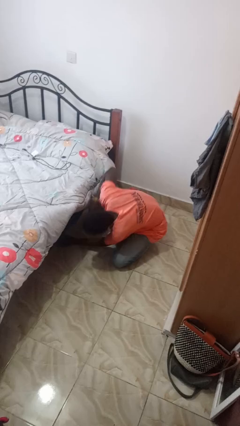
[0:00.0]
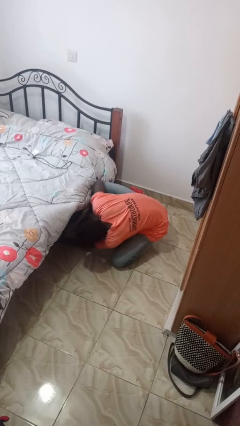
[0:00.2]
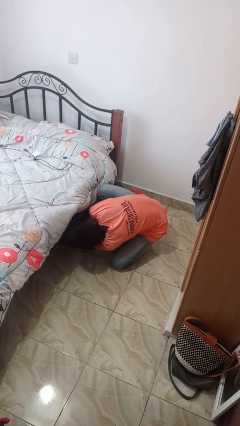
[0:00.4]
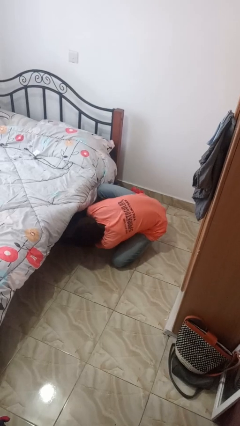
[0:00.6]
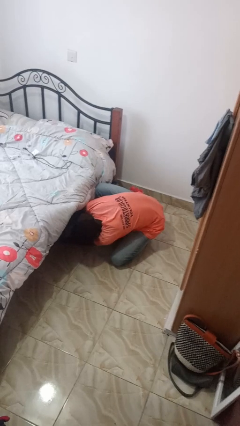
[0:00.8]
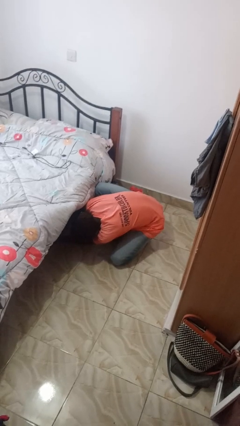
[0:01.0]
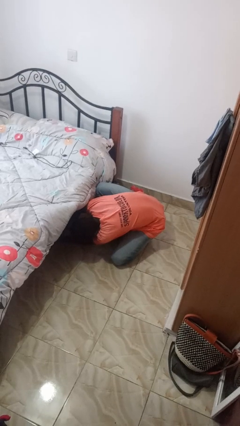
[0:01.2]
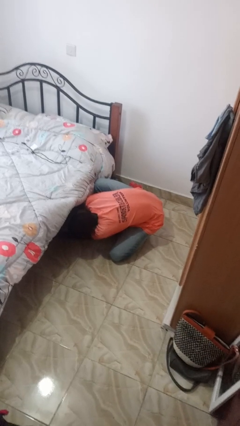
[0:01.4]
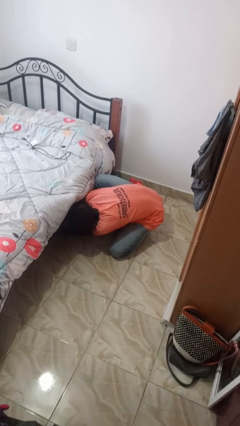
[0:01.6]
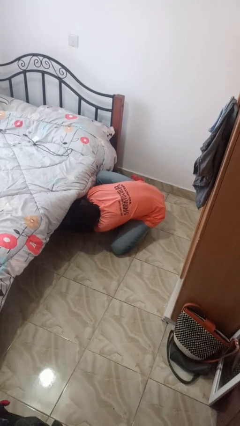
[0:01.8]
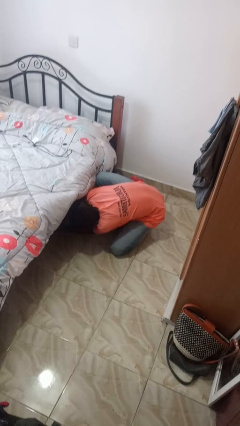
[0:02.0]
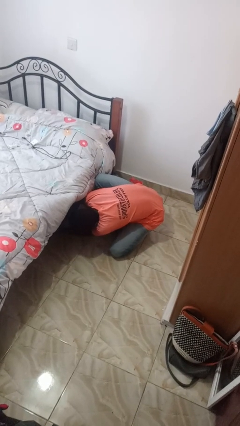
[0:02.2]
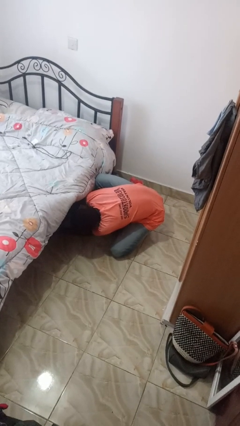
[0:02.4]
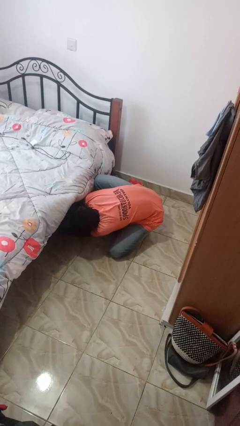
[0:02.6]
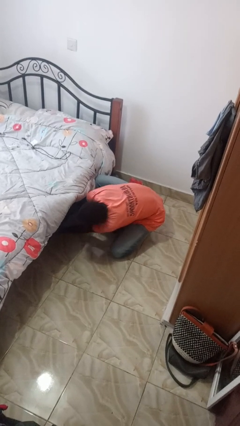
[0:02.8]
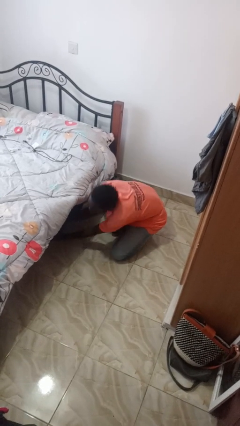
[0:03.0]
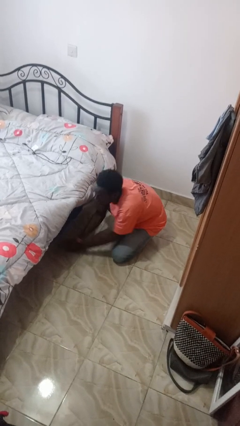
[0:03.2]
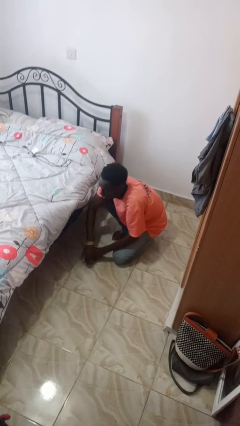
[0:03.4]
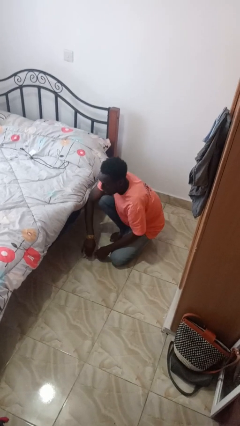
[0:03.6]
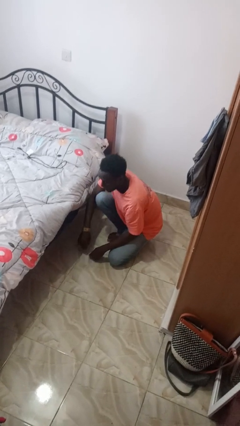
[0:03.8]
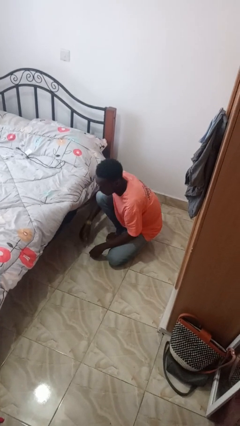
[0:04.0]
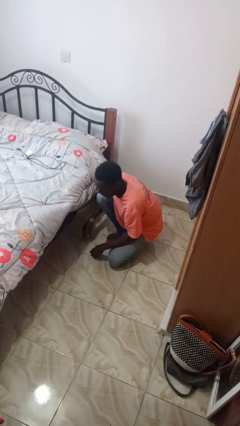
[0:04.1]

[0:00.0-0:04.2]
person searches under bed

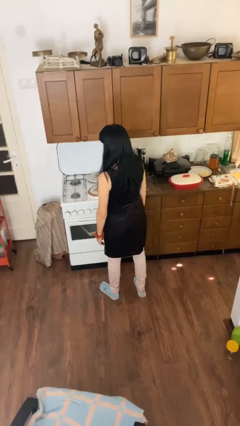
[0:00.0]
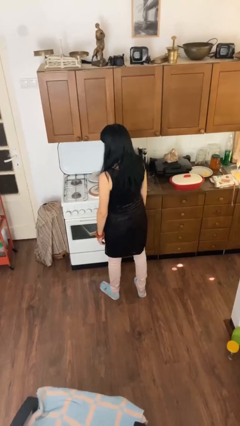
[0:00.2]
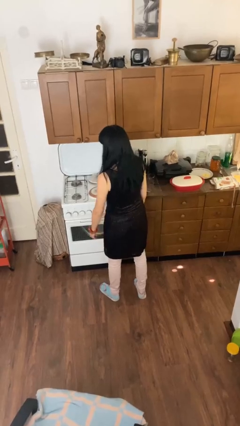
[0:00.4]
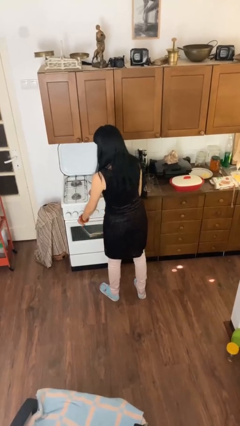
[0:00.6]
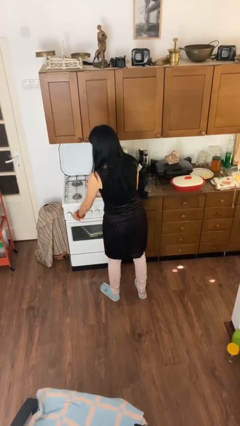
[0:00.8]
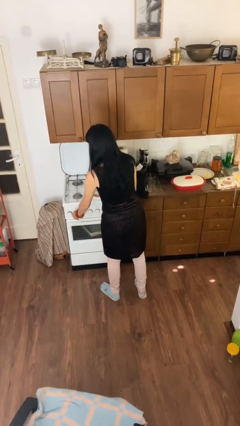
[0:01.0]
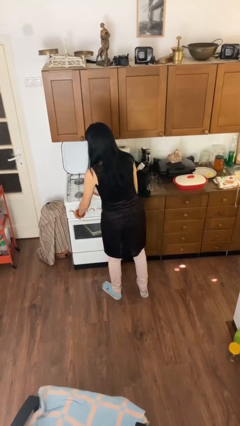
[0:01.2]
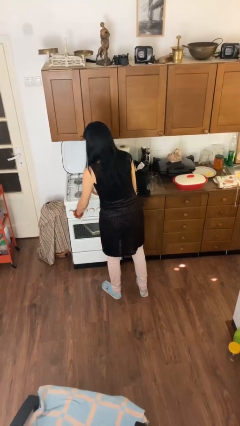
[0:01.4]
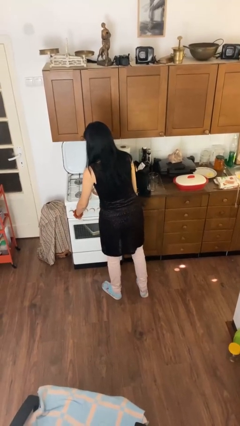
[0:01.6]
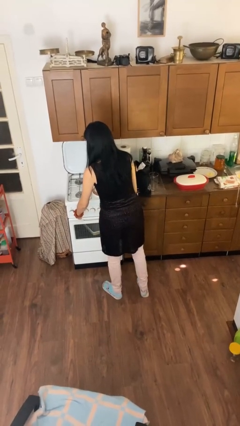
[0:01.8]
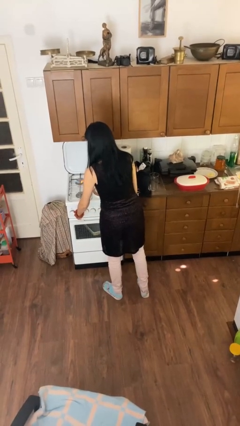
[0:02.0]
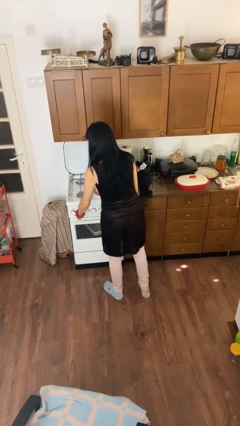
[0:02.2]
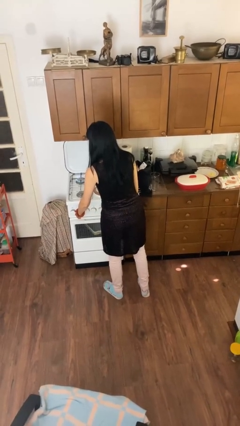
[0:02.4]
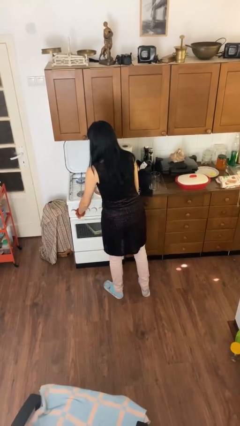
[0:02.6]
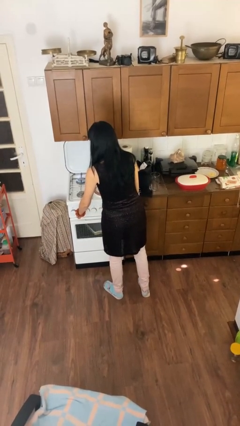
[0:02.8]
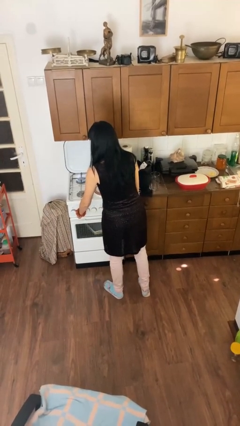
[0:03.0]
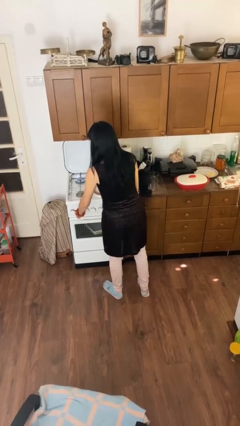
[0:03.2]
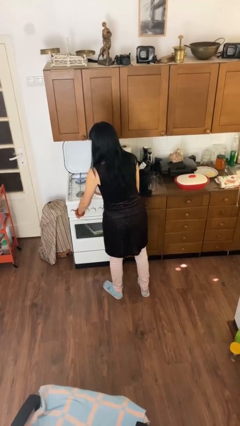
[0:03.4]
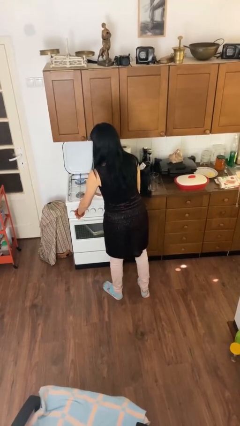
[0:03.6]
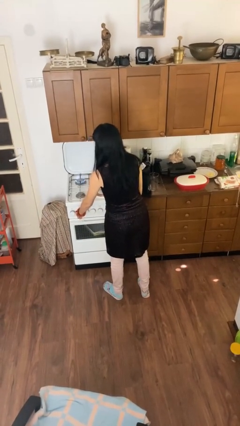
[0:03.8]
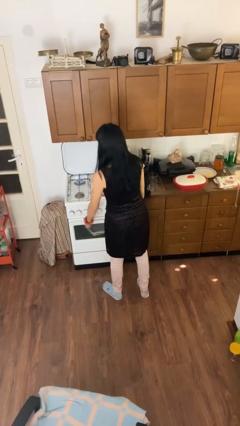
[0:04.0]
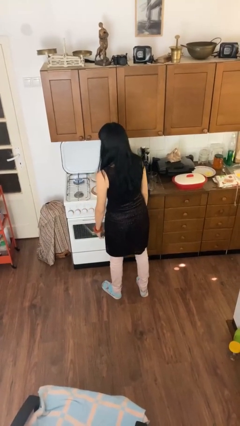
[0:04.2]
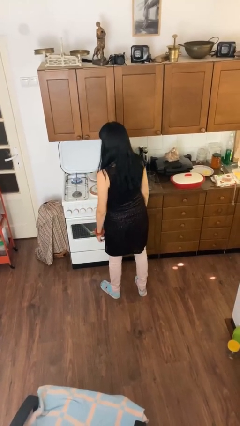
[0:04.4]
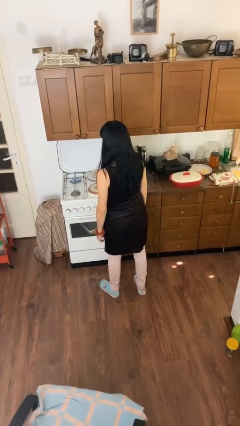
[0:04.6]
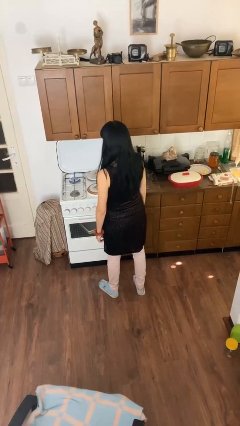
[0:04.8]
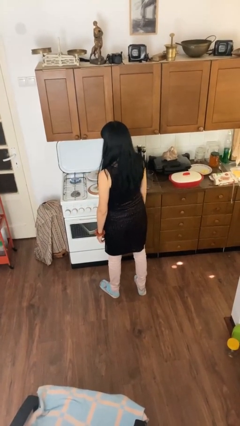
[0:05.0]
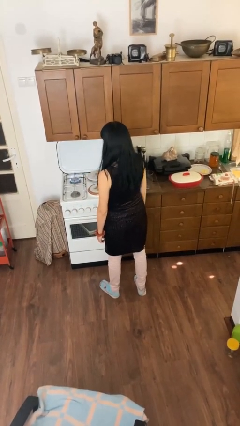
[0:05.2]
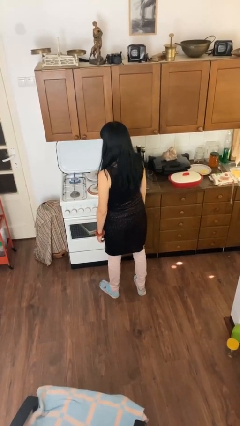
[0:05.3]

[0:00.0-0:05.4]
person turns on stovetop

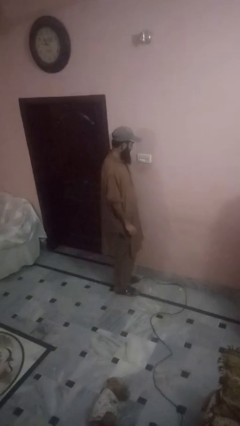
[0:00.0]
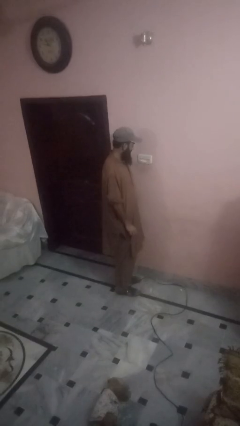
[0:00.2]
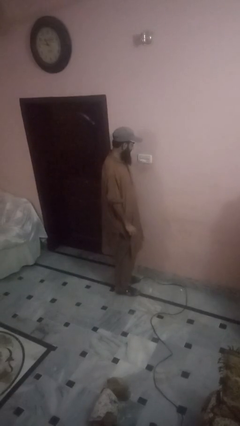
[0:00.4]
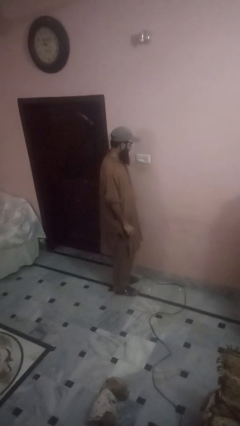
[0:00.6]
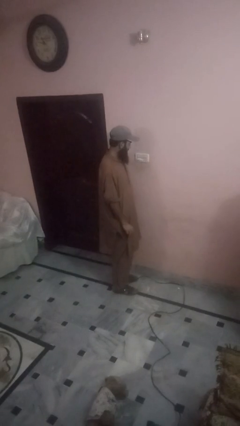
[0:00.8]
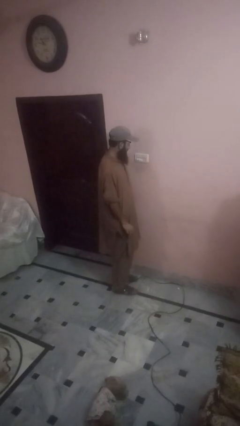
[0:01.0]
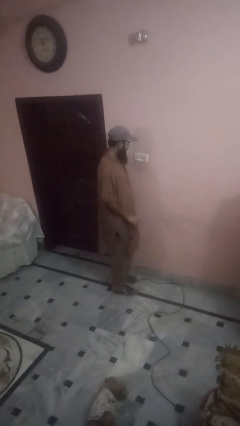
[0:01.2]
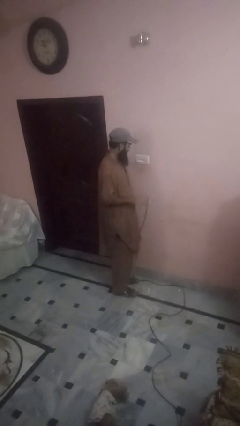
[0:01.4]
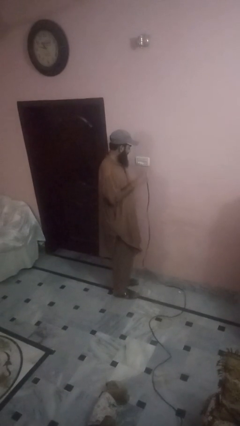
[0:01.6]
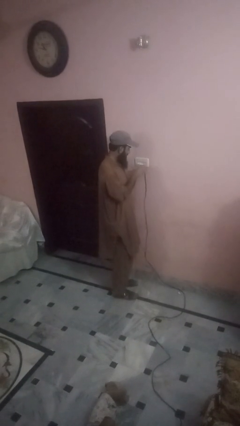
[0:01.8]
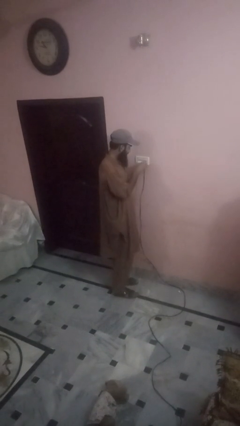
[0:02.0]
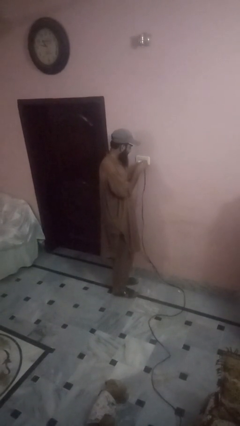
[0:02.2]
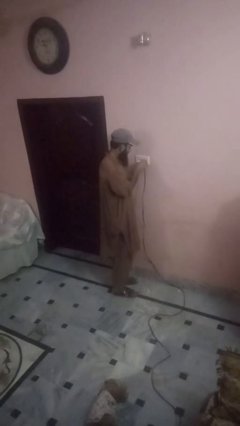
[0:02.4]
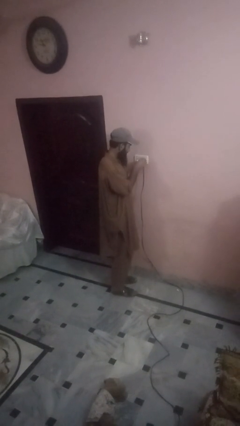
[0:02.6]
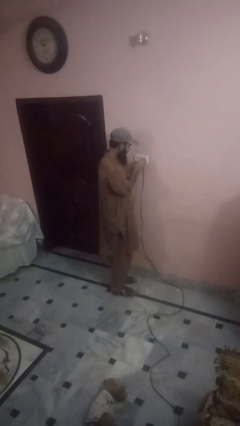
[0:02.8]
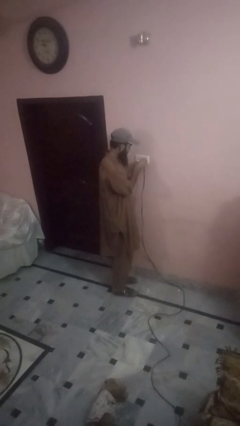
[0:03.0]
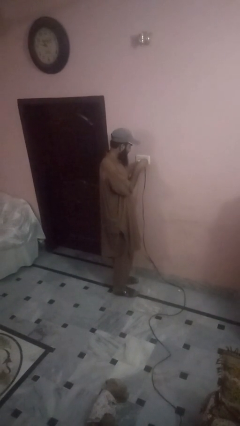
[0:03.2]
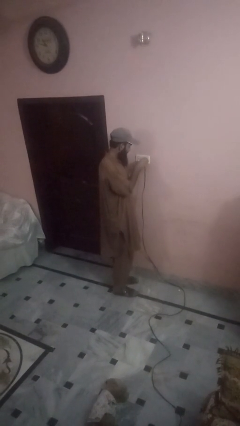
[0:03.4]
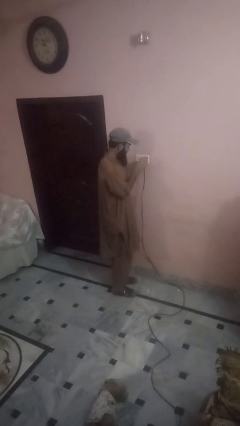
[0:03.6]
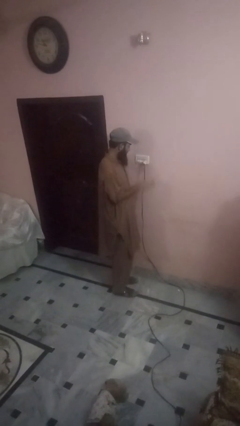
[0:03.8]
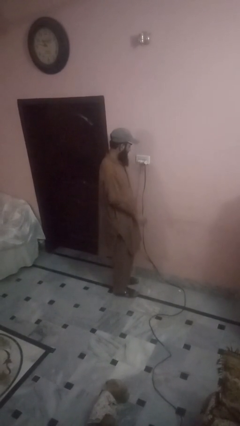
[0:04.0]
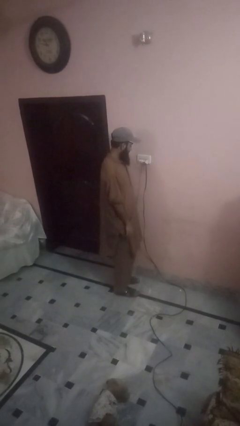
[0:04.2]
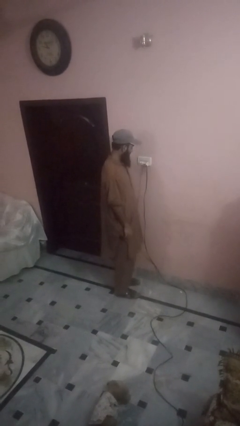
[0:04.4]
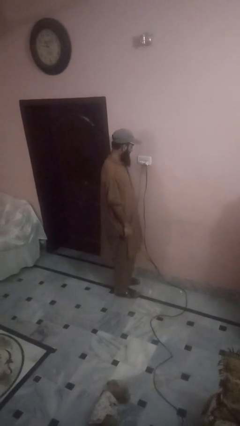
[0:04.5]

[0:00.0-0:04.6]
person plugs into electrical socket

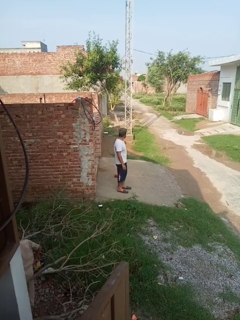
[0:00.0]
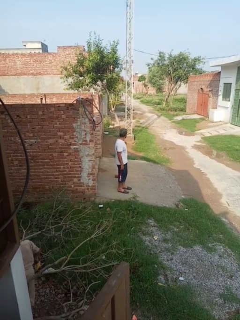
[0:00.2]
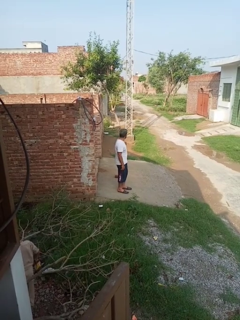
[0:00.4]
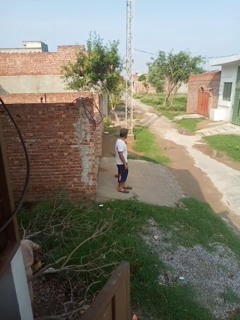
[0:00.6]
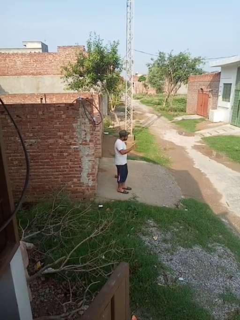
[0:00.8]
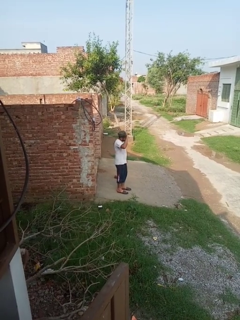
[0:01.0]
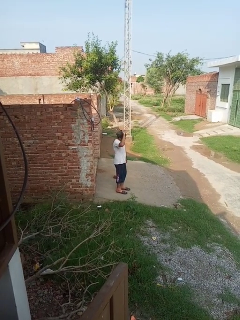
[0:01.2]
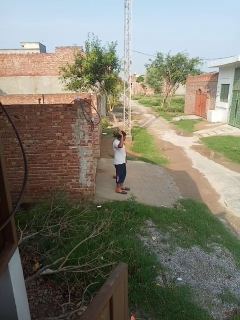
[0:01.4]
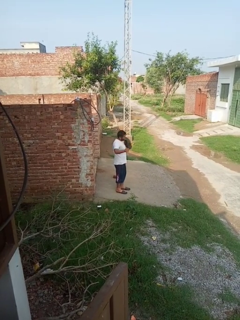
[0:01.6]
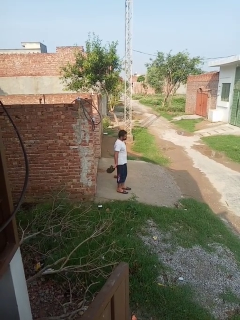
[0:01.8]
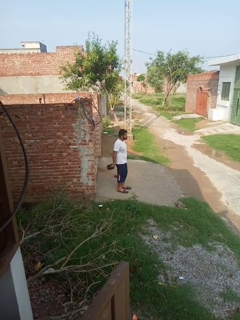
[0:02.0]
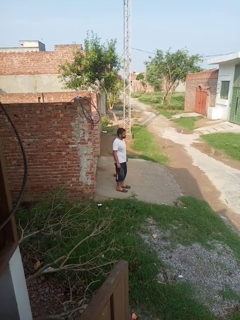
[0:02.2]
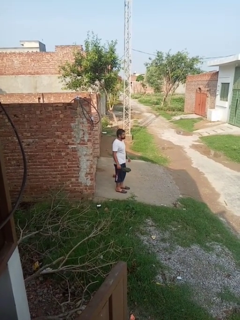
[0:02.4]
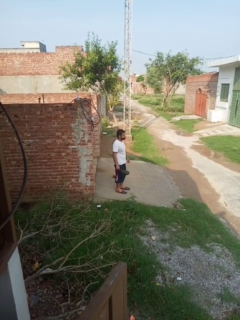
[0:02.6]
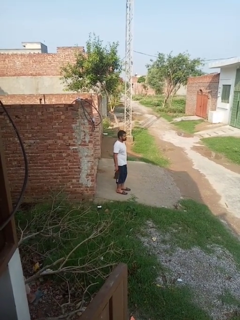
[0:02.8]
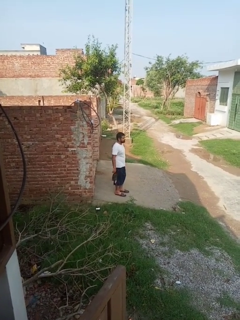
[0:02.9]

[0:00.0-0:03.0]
person takes off hat

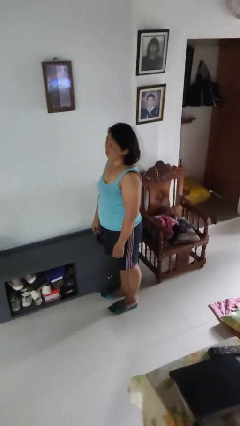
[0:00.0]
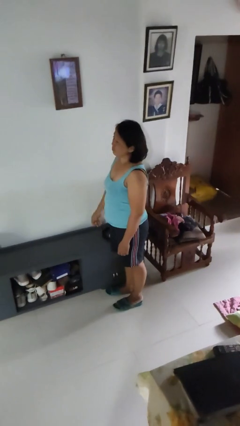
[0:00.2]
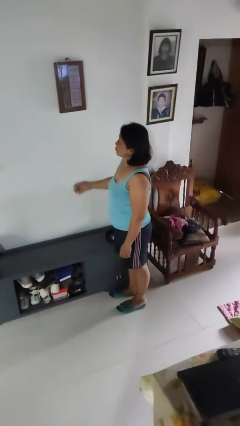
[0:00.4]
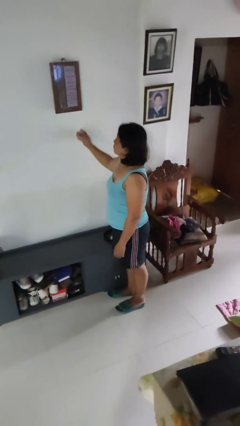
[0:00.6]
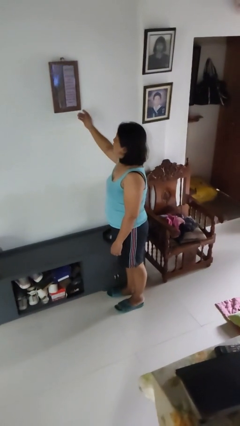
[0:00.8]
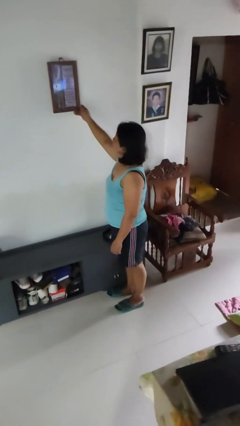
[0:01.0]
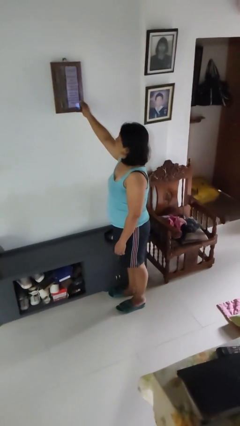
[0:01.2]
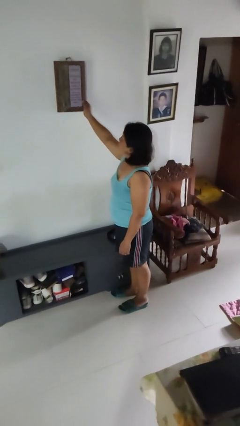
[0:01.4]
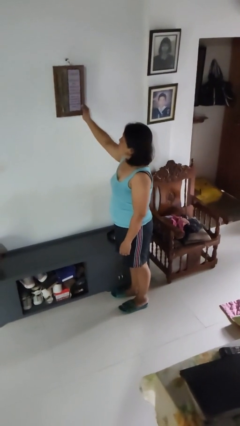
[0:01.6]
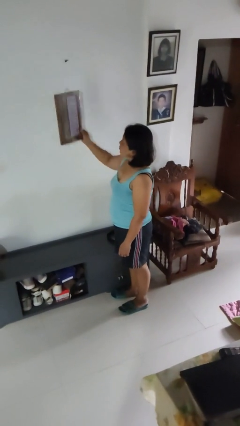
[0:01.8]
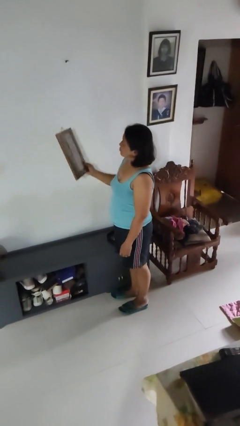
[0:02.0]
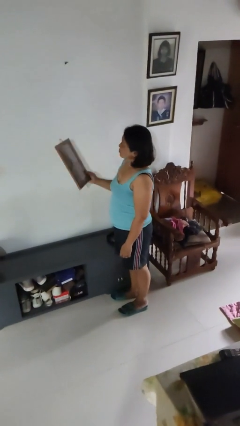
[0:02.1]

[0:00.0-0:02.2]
person takes down picture frame
